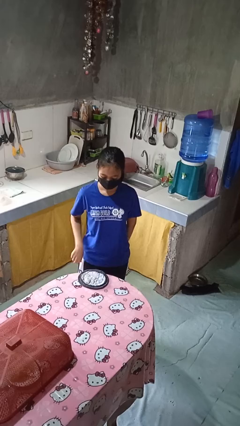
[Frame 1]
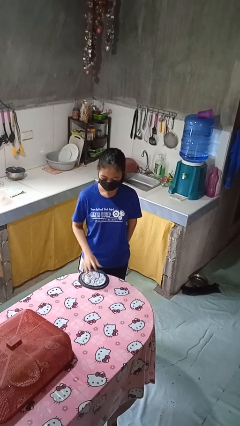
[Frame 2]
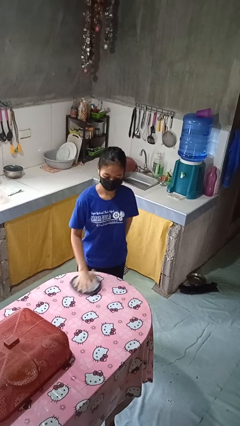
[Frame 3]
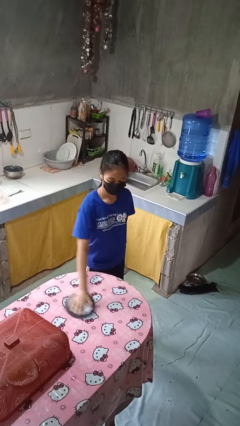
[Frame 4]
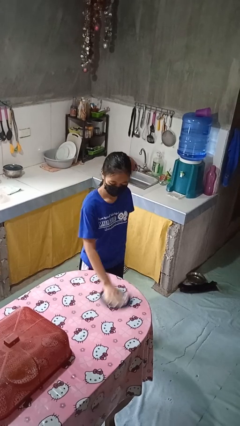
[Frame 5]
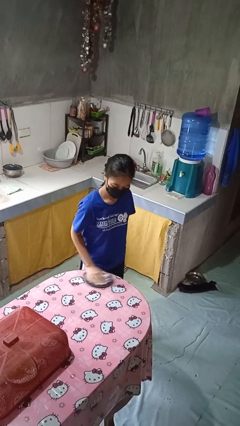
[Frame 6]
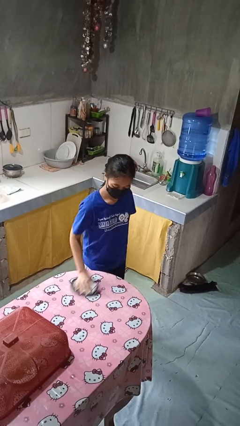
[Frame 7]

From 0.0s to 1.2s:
person cleans table with rag

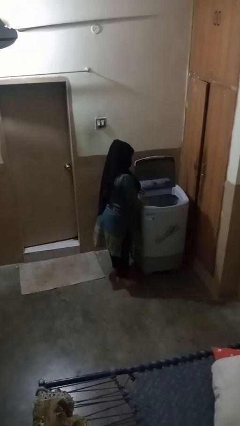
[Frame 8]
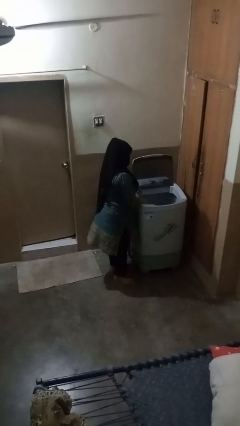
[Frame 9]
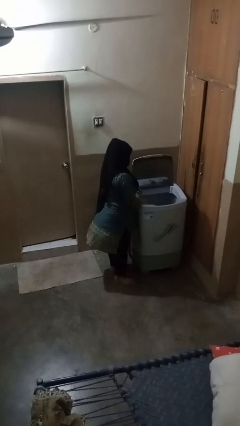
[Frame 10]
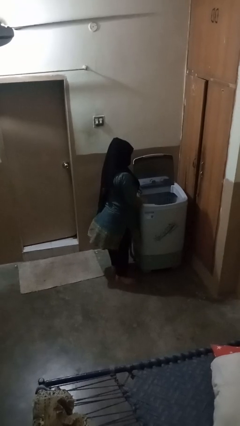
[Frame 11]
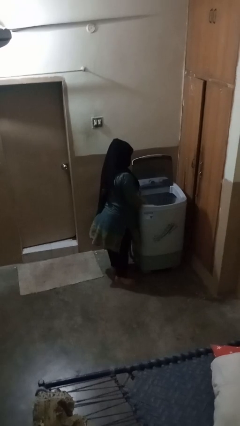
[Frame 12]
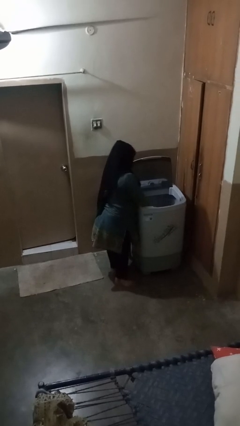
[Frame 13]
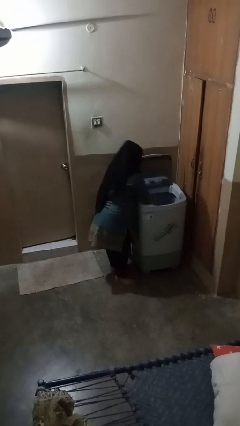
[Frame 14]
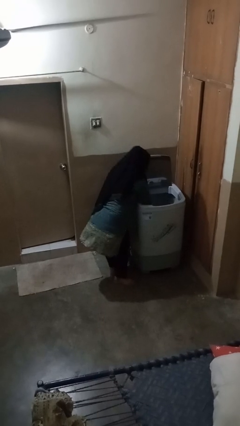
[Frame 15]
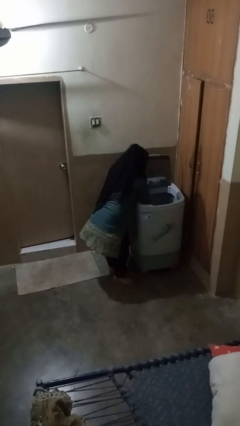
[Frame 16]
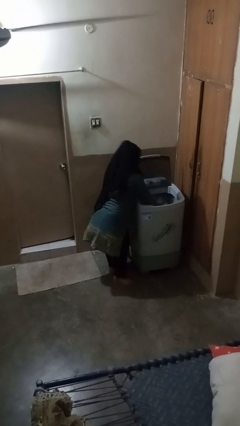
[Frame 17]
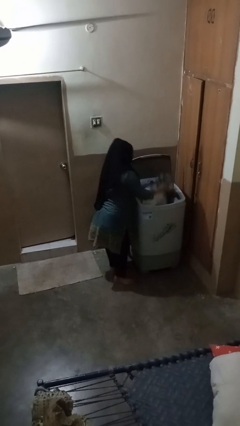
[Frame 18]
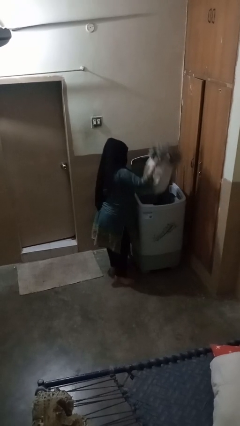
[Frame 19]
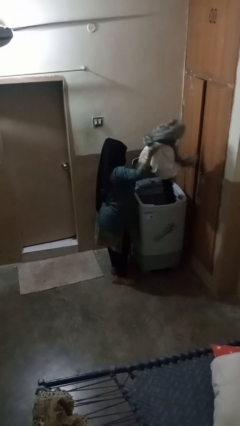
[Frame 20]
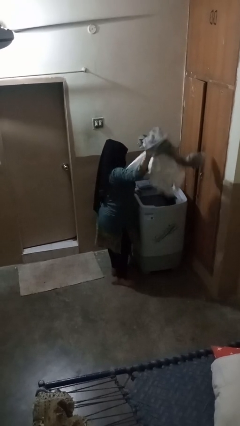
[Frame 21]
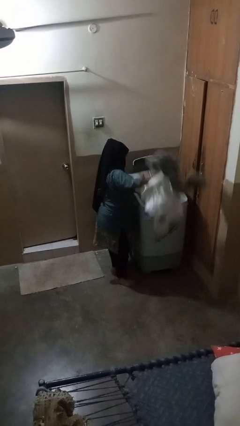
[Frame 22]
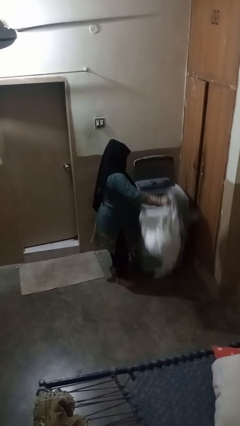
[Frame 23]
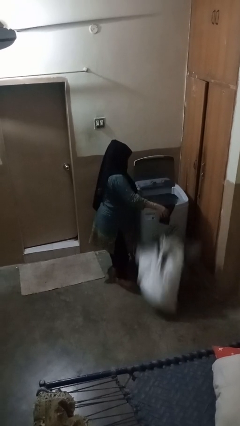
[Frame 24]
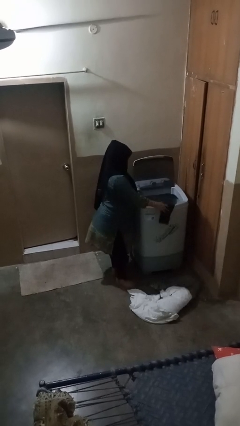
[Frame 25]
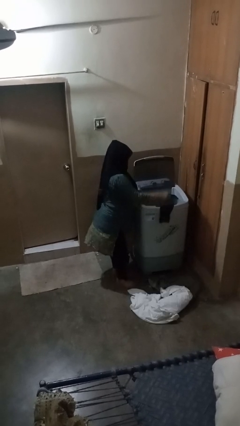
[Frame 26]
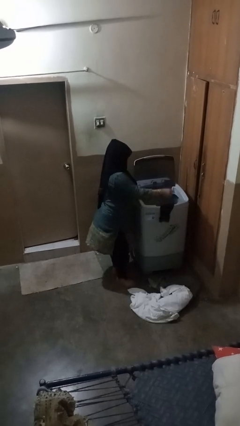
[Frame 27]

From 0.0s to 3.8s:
person unloads clotheswasher

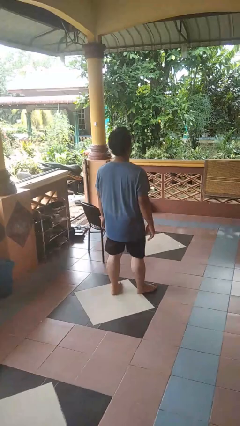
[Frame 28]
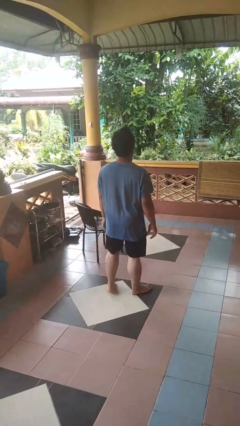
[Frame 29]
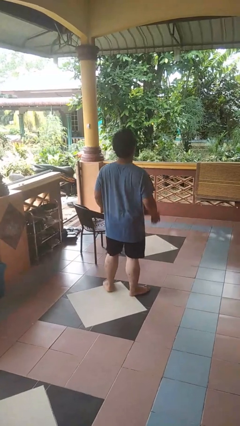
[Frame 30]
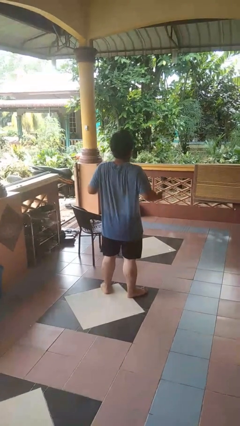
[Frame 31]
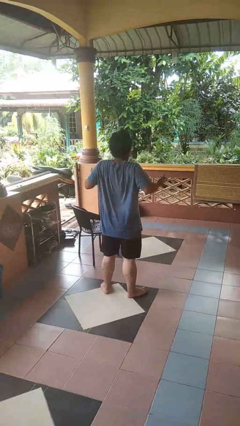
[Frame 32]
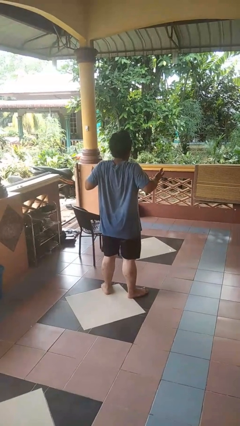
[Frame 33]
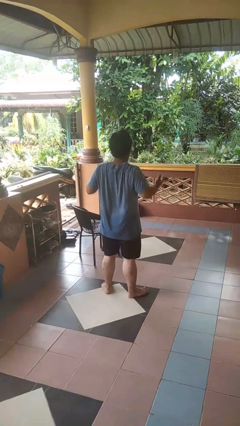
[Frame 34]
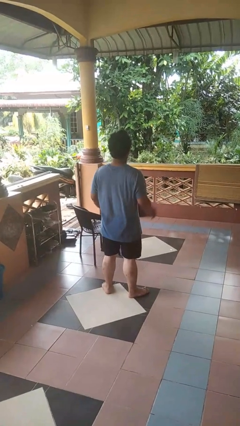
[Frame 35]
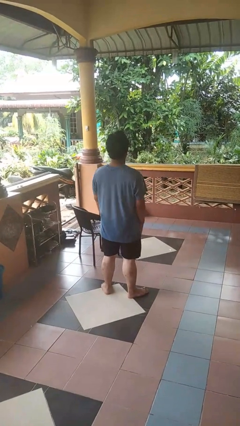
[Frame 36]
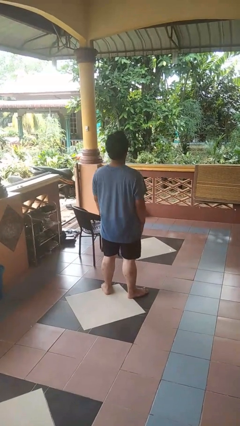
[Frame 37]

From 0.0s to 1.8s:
person shrugs

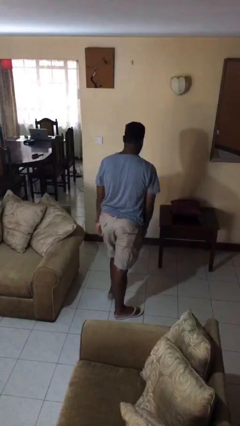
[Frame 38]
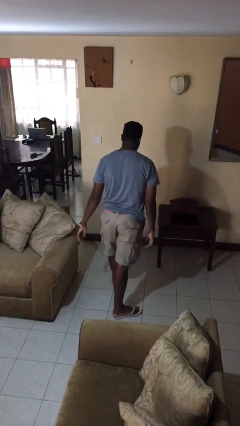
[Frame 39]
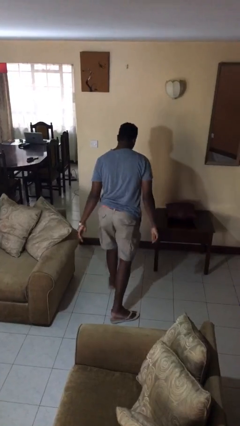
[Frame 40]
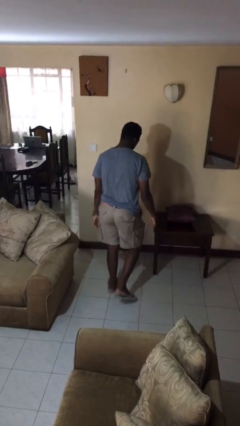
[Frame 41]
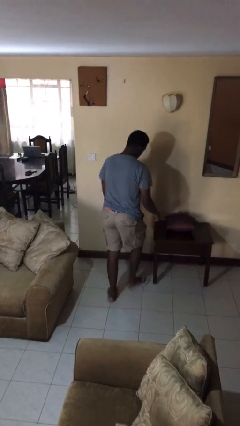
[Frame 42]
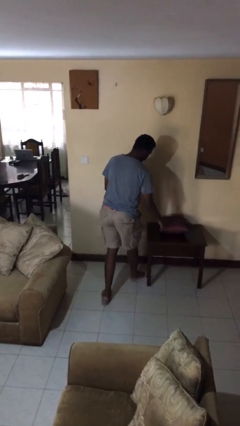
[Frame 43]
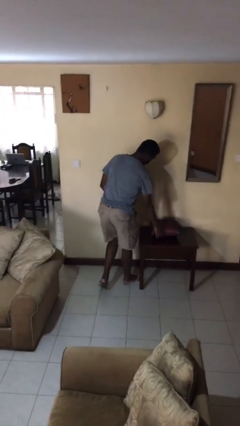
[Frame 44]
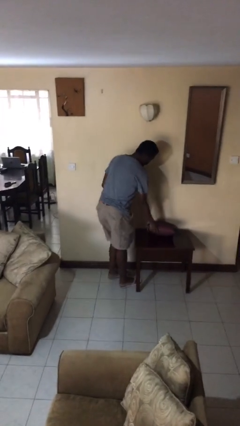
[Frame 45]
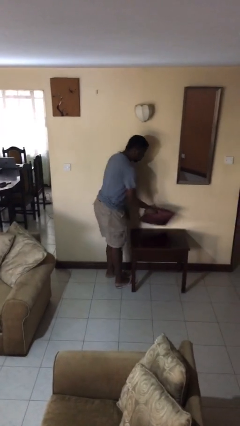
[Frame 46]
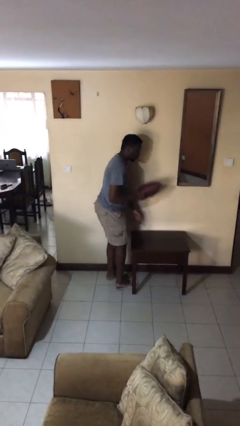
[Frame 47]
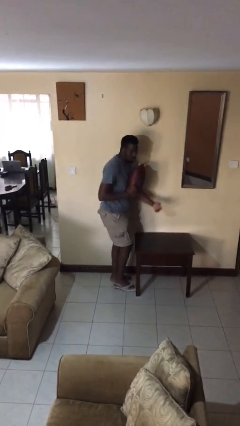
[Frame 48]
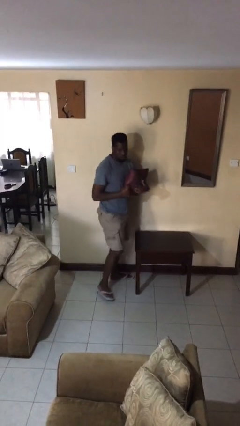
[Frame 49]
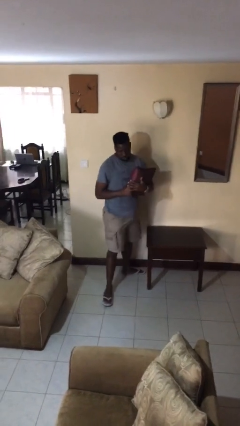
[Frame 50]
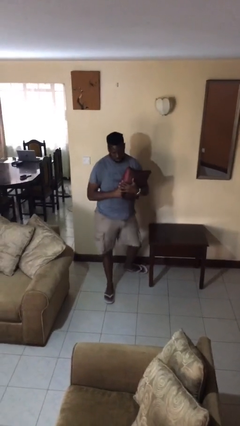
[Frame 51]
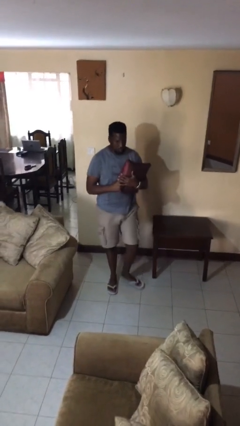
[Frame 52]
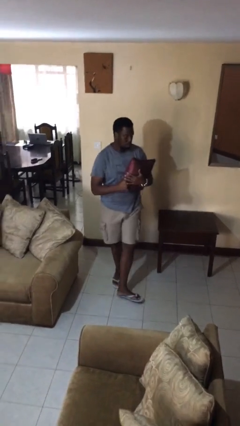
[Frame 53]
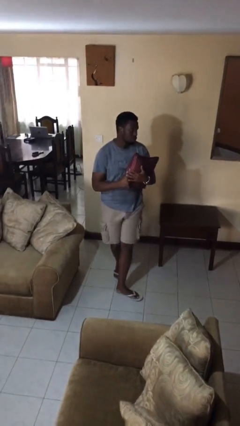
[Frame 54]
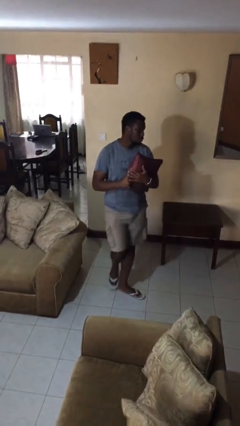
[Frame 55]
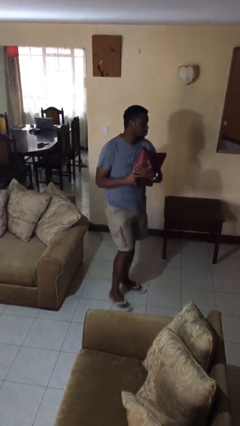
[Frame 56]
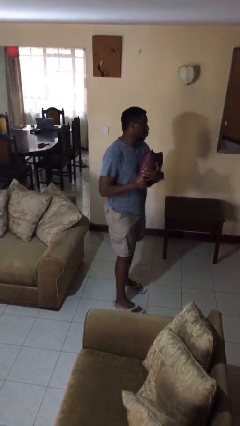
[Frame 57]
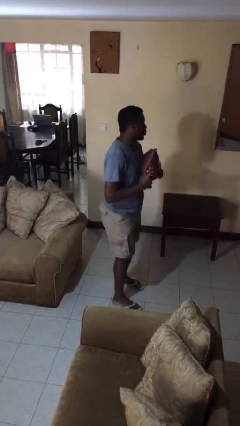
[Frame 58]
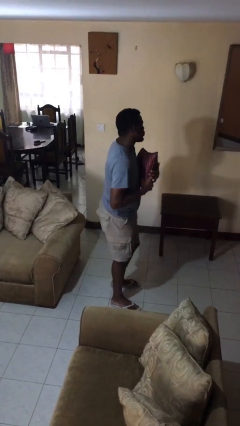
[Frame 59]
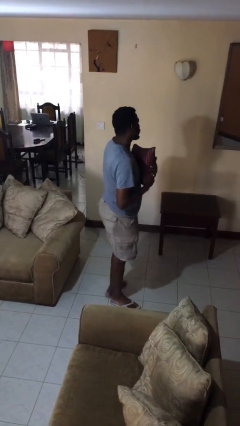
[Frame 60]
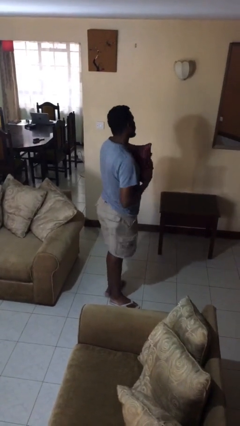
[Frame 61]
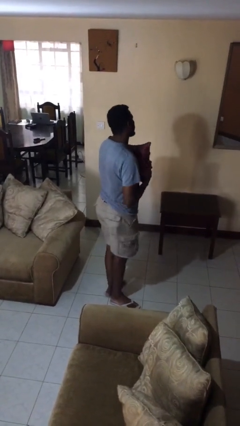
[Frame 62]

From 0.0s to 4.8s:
person picks up object from table

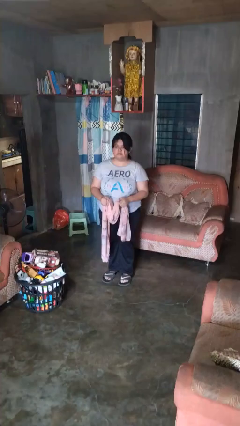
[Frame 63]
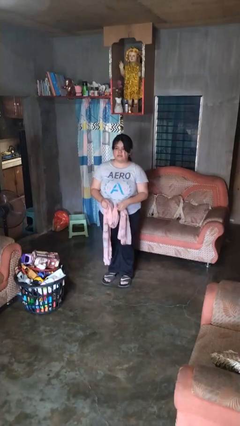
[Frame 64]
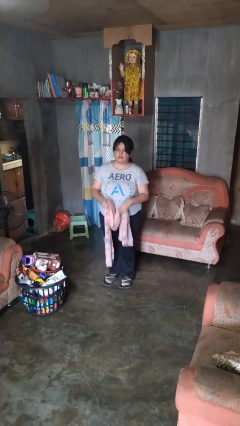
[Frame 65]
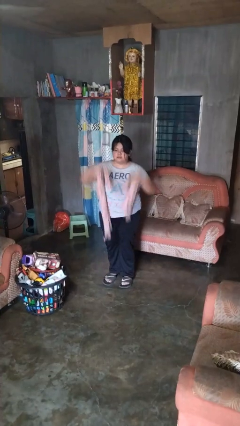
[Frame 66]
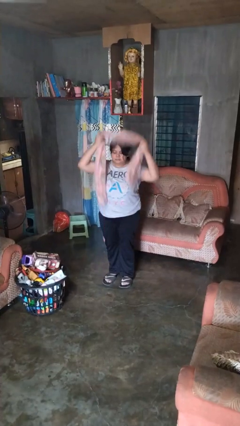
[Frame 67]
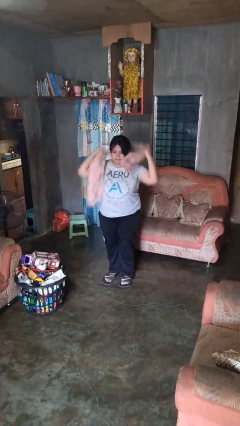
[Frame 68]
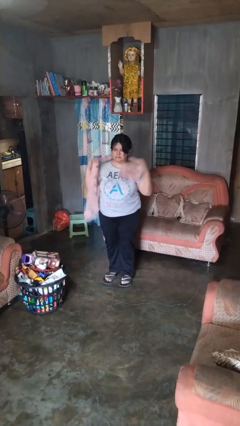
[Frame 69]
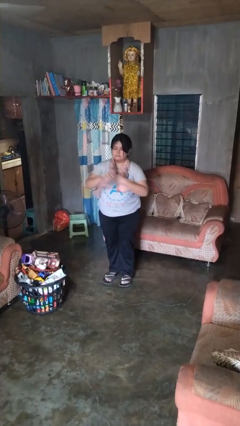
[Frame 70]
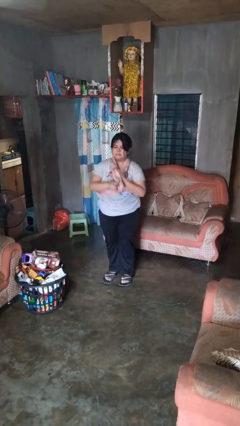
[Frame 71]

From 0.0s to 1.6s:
person puts on scarf

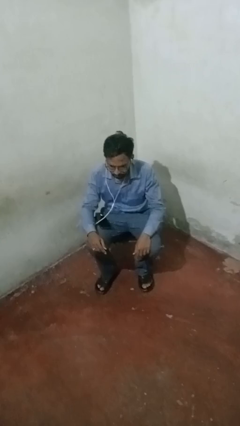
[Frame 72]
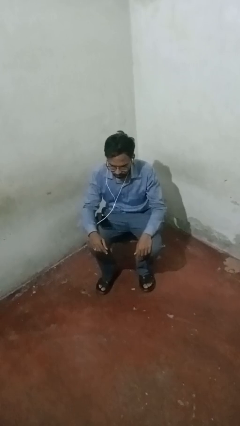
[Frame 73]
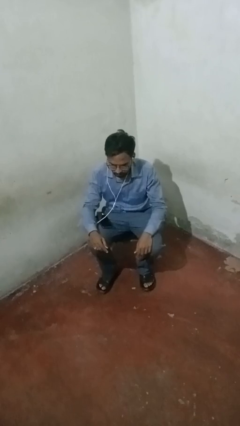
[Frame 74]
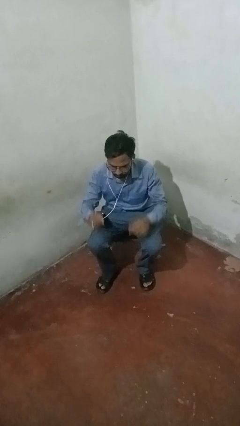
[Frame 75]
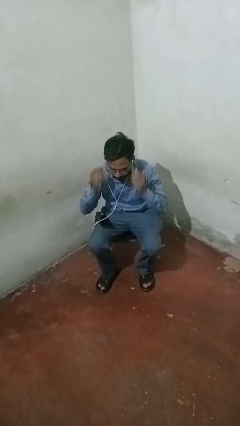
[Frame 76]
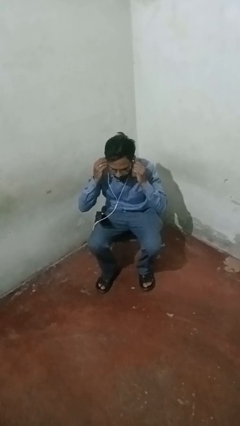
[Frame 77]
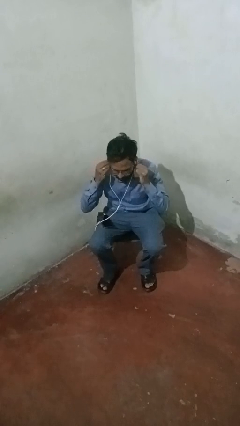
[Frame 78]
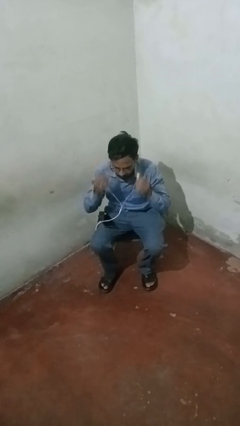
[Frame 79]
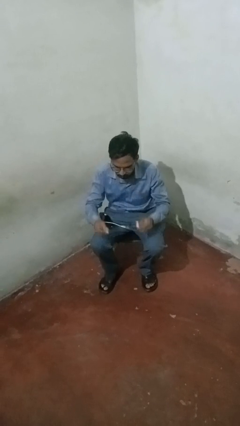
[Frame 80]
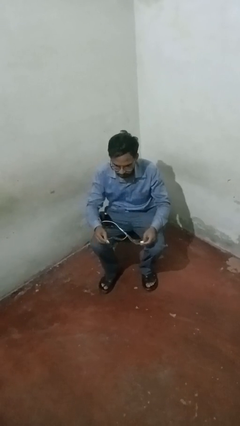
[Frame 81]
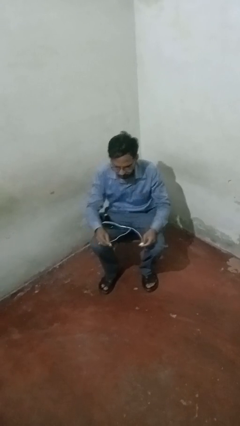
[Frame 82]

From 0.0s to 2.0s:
person takes off headphones

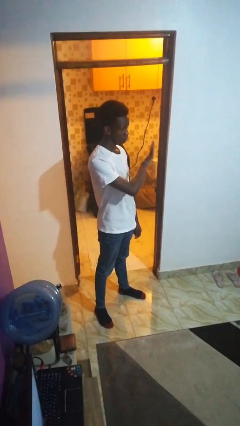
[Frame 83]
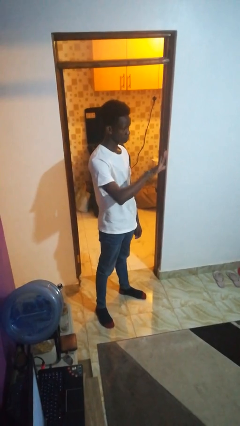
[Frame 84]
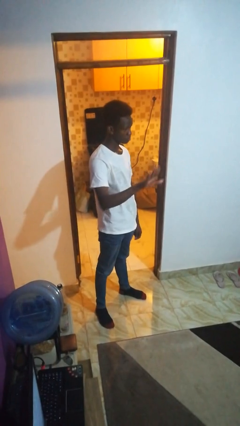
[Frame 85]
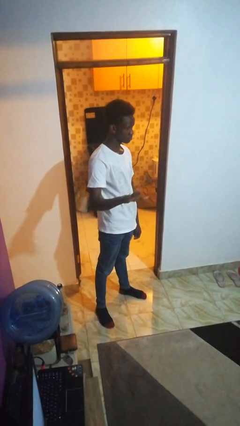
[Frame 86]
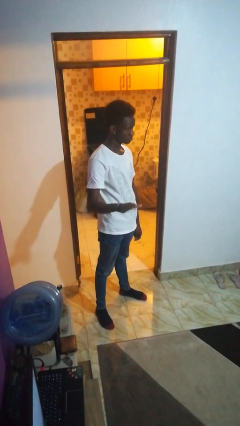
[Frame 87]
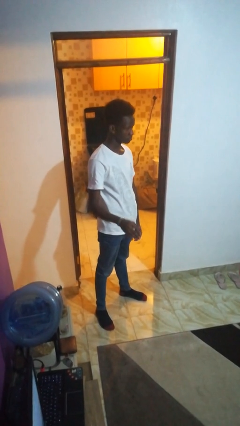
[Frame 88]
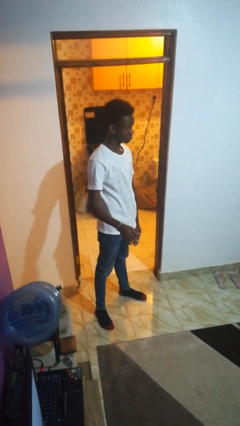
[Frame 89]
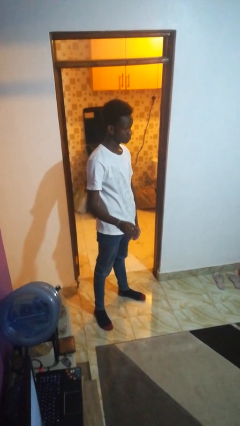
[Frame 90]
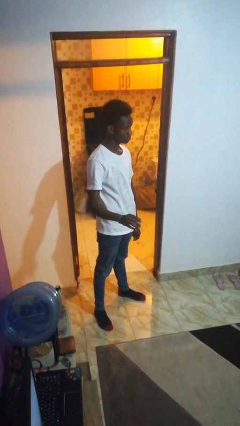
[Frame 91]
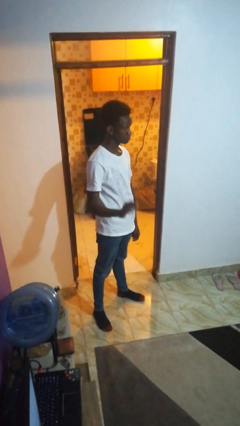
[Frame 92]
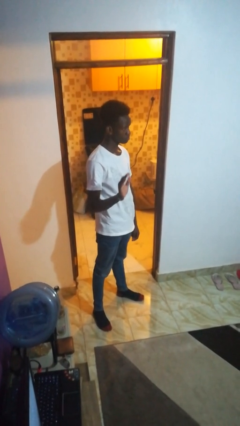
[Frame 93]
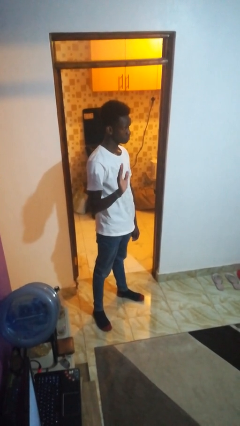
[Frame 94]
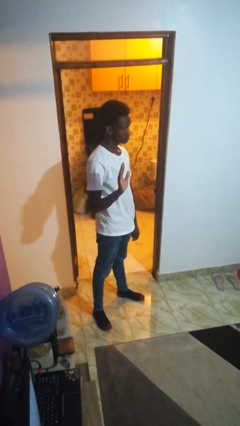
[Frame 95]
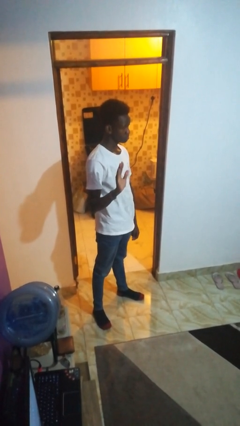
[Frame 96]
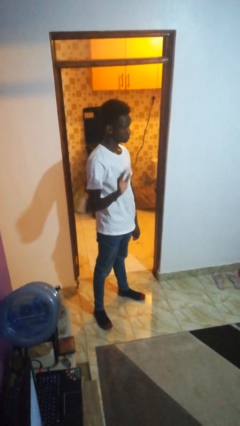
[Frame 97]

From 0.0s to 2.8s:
person gestures swipe right
